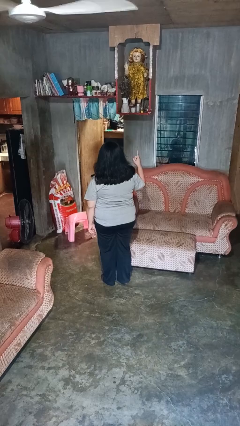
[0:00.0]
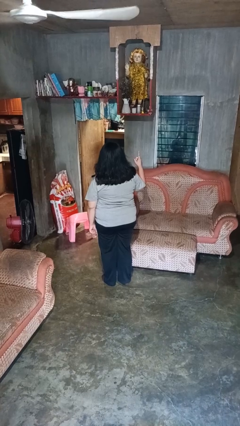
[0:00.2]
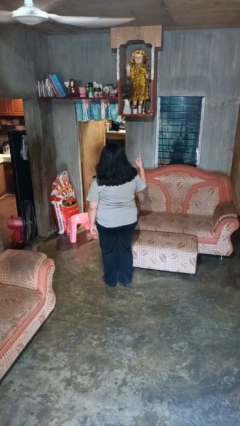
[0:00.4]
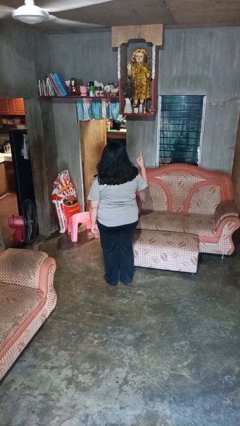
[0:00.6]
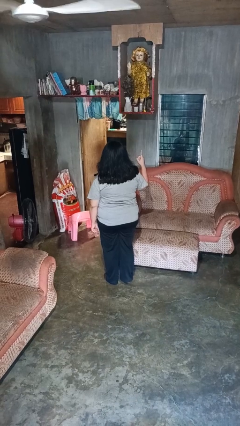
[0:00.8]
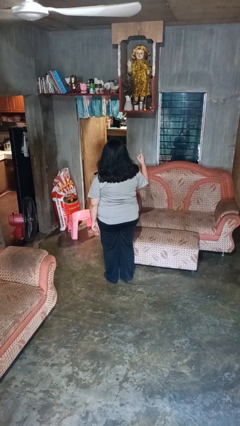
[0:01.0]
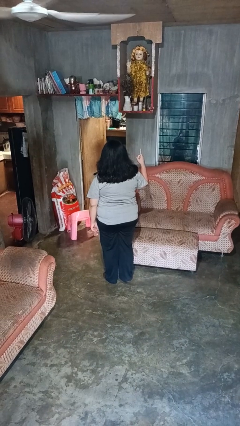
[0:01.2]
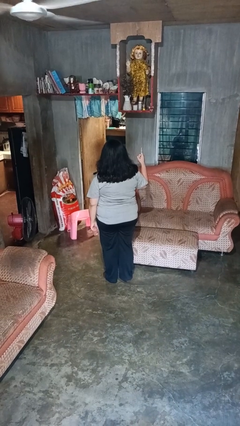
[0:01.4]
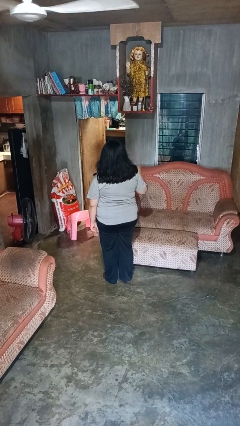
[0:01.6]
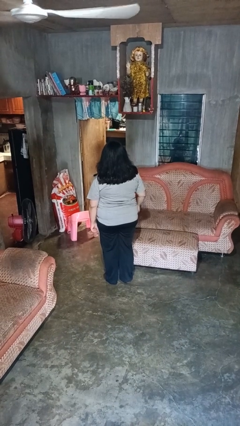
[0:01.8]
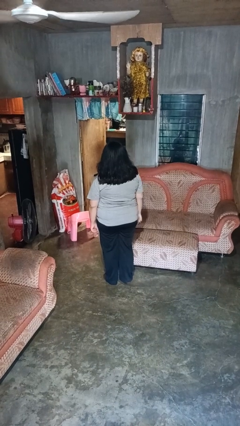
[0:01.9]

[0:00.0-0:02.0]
person gestures number one

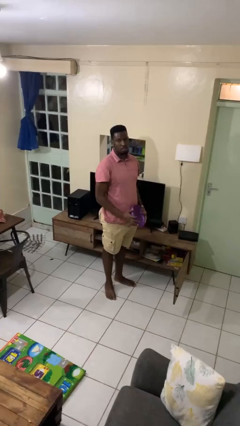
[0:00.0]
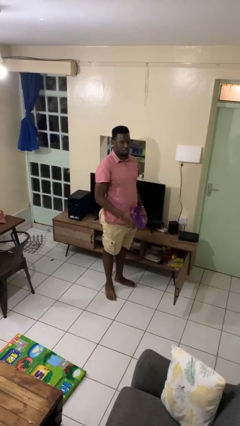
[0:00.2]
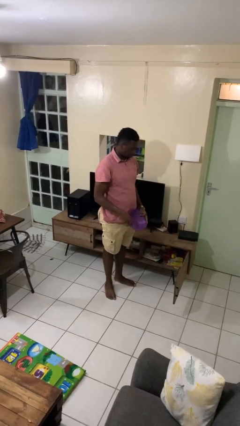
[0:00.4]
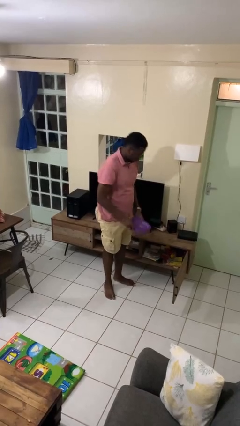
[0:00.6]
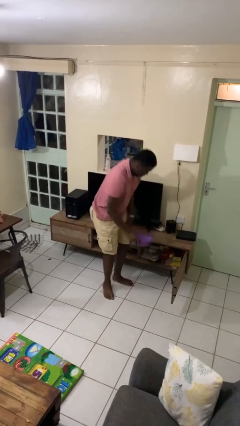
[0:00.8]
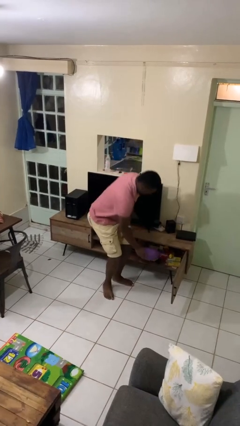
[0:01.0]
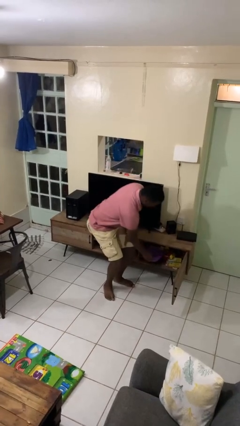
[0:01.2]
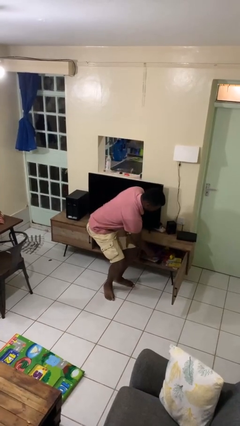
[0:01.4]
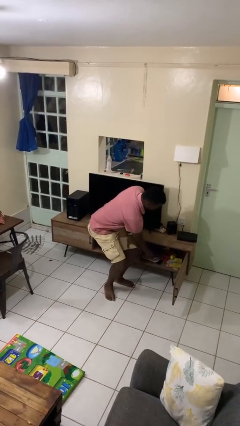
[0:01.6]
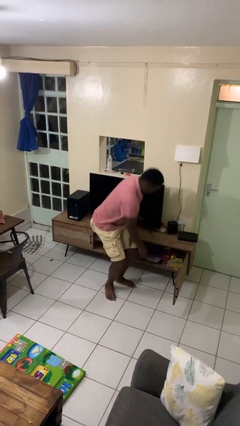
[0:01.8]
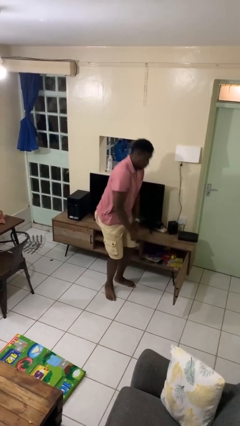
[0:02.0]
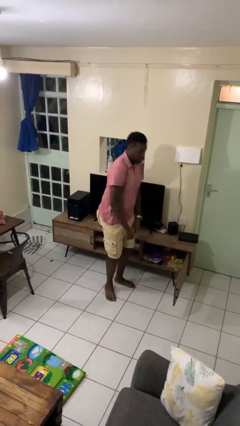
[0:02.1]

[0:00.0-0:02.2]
person puts down object into cabinet

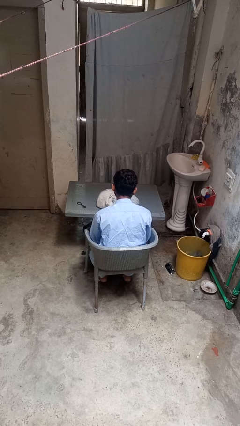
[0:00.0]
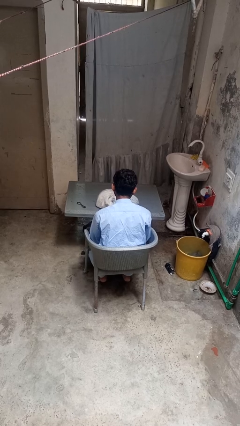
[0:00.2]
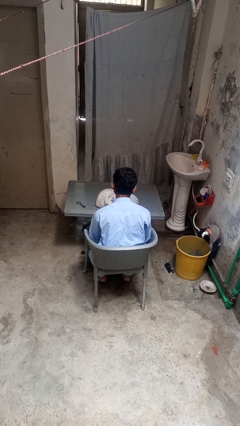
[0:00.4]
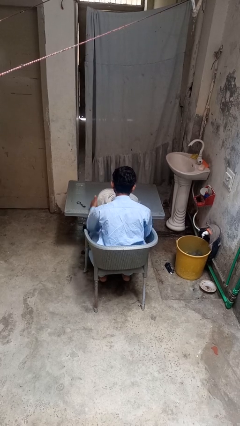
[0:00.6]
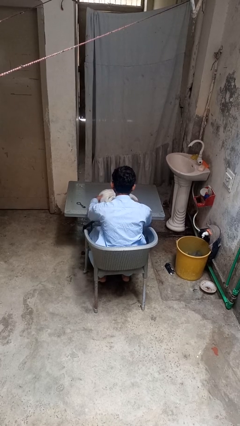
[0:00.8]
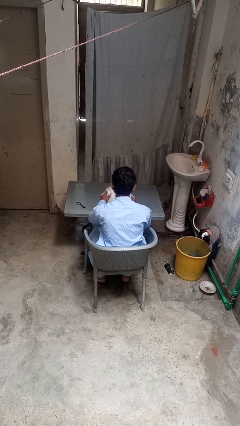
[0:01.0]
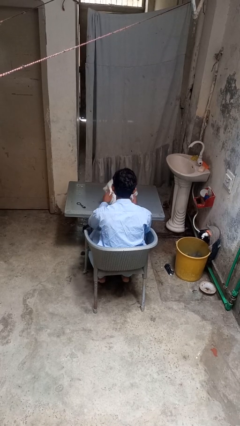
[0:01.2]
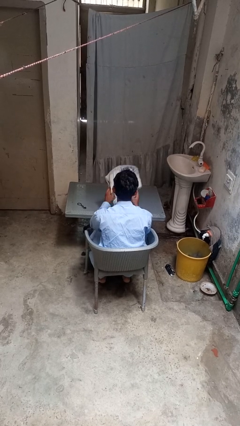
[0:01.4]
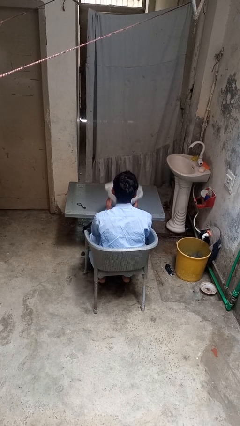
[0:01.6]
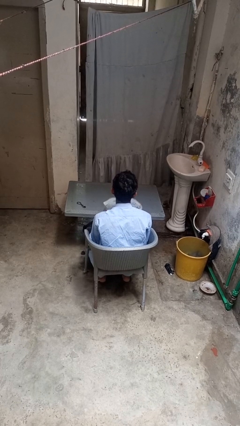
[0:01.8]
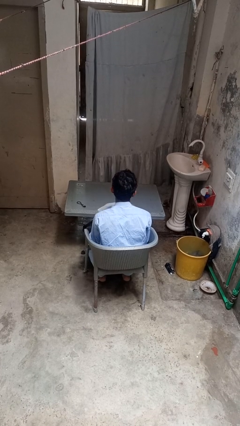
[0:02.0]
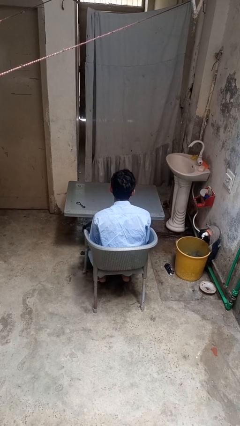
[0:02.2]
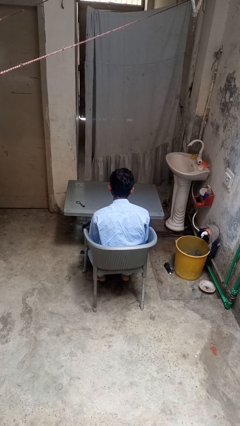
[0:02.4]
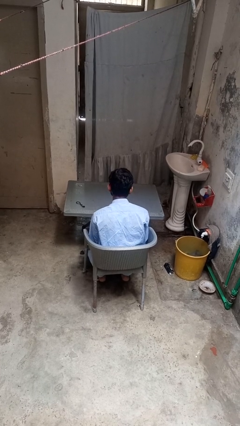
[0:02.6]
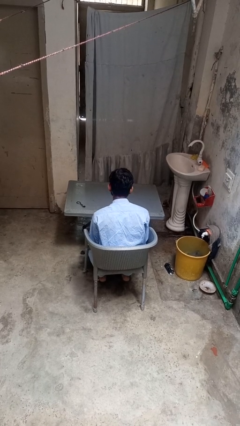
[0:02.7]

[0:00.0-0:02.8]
person picks up object from table

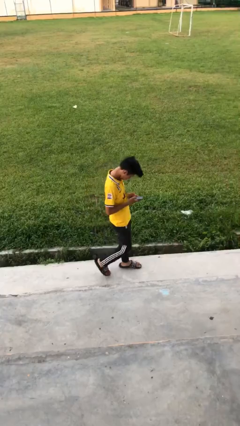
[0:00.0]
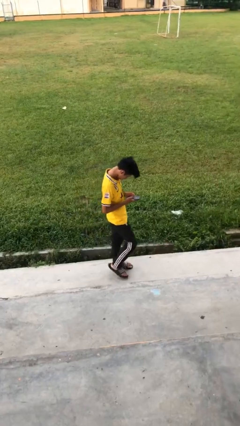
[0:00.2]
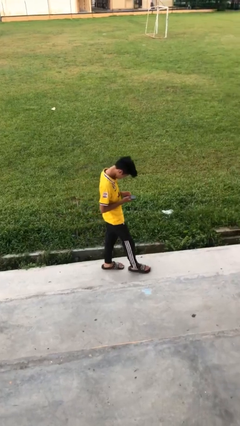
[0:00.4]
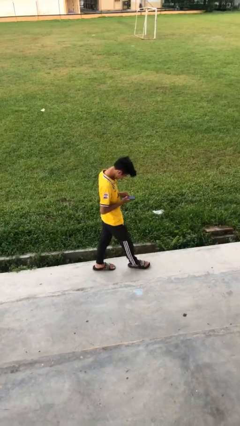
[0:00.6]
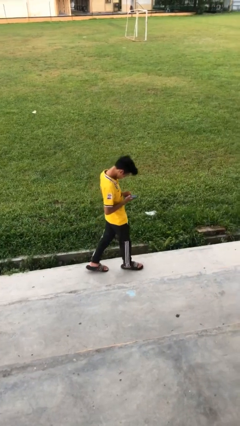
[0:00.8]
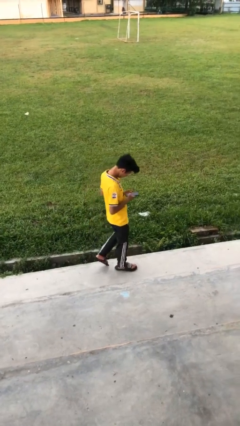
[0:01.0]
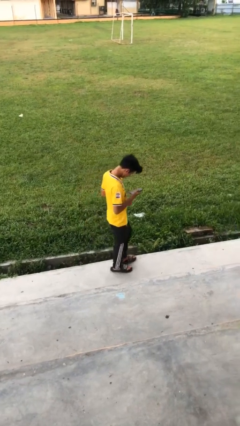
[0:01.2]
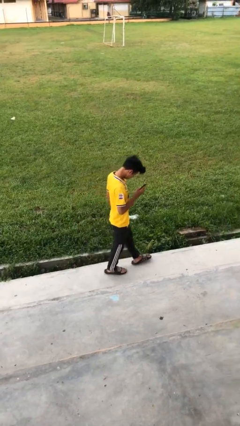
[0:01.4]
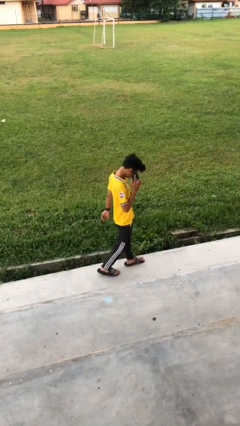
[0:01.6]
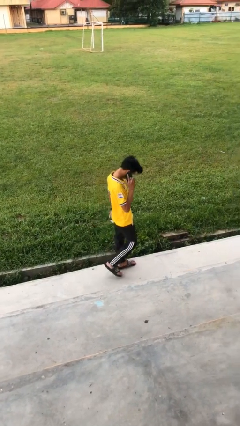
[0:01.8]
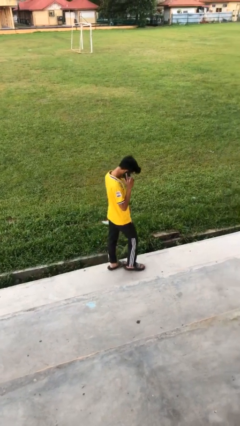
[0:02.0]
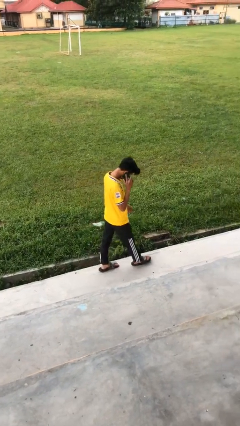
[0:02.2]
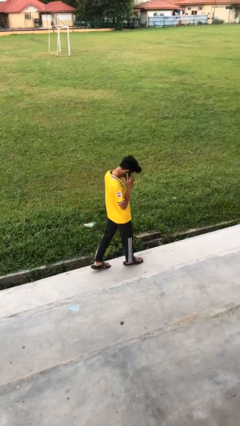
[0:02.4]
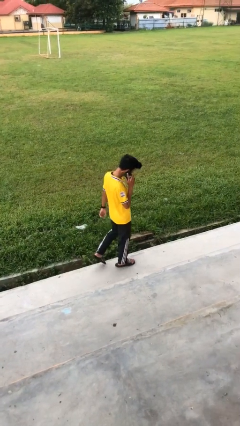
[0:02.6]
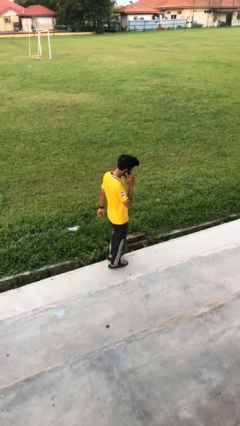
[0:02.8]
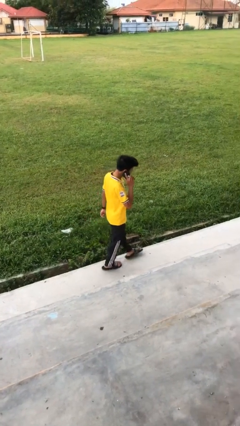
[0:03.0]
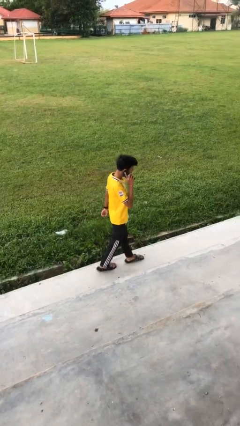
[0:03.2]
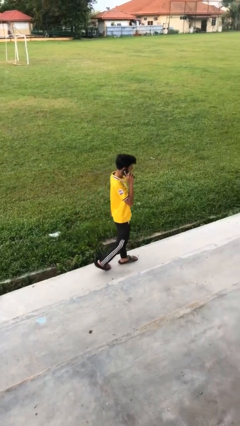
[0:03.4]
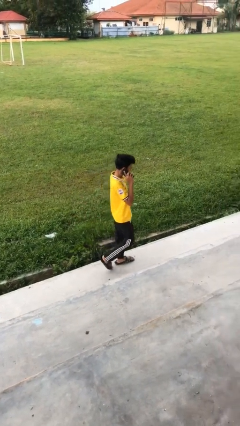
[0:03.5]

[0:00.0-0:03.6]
person talks on phone

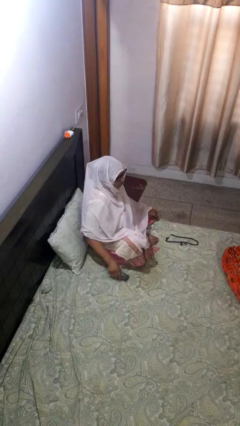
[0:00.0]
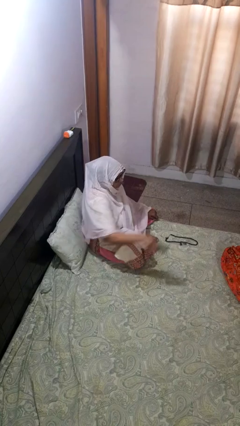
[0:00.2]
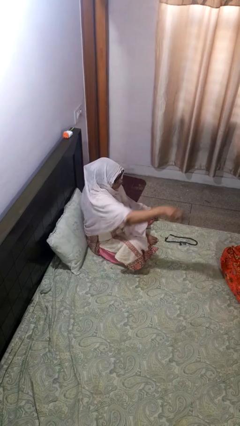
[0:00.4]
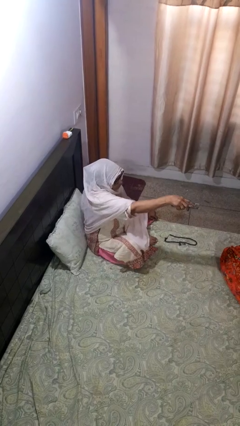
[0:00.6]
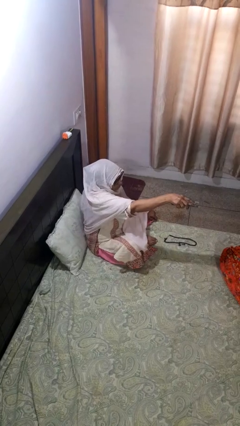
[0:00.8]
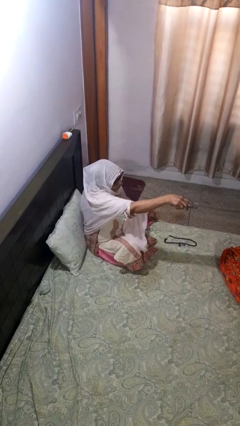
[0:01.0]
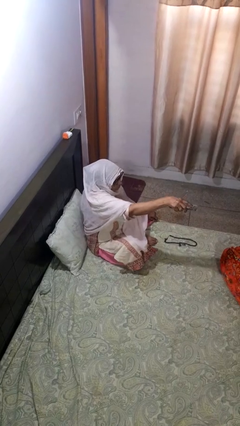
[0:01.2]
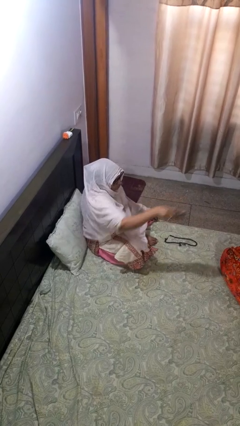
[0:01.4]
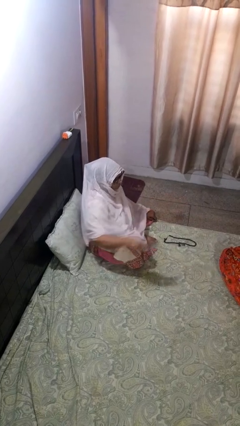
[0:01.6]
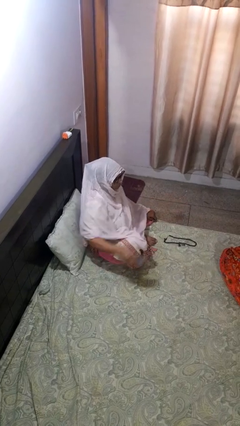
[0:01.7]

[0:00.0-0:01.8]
person uses television remote

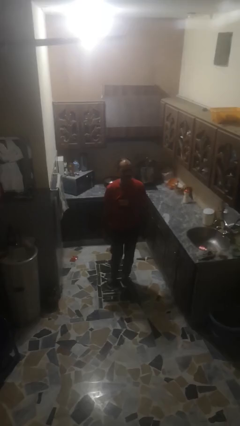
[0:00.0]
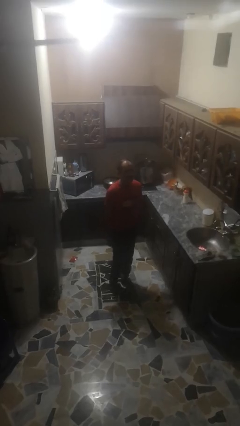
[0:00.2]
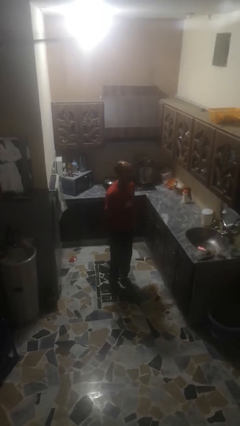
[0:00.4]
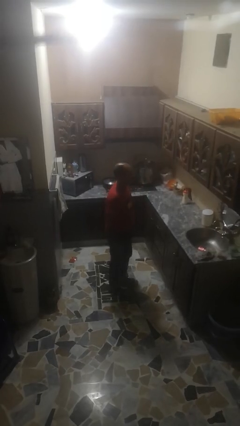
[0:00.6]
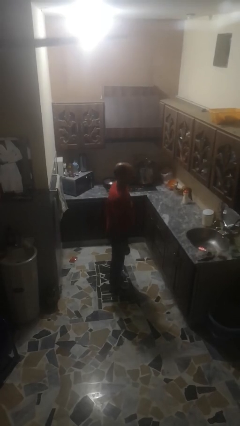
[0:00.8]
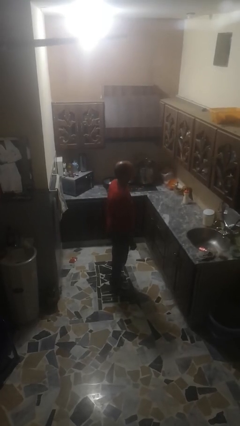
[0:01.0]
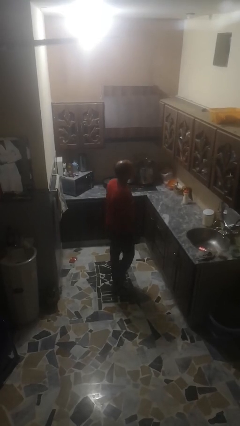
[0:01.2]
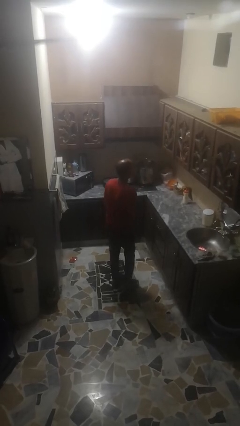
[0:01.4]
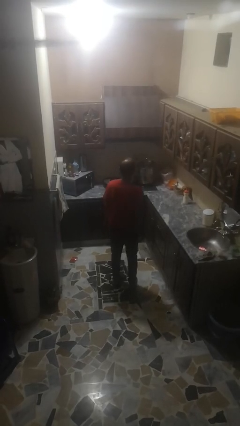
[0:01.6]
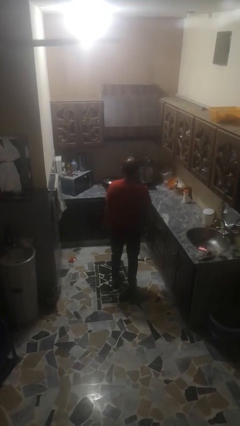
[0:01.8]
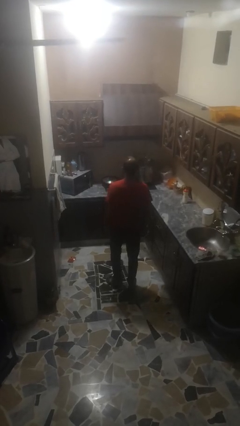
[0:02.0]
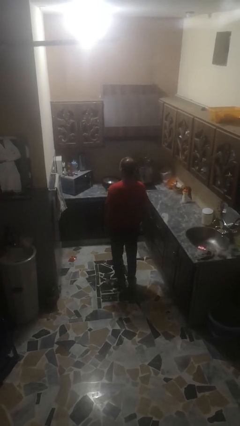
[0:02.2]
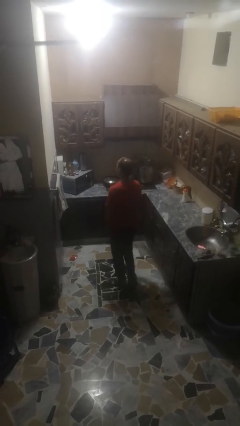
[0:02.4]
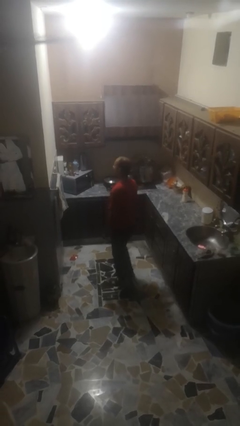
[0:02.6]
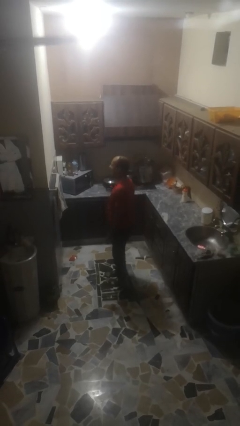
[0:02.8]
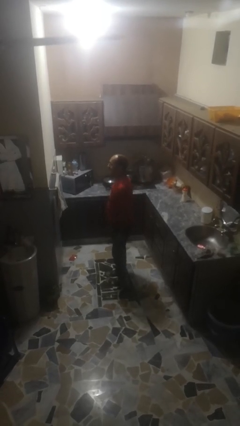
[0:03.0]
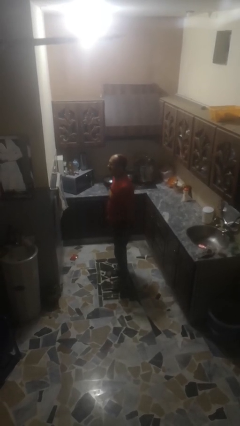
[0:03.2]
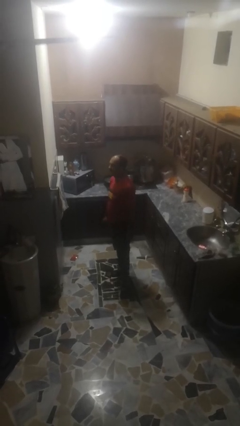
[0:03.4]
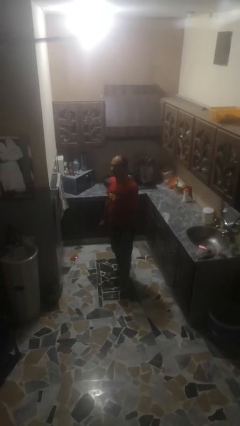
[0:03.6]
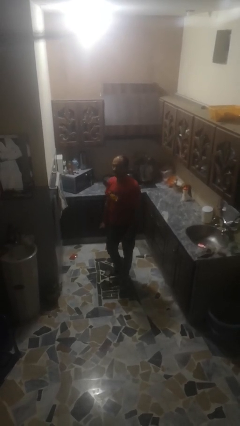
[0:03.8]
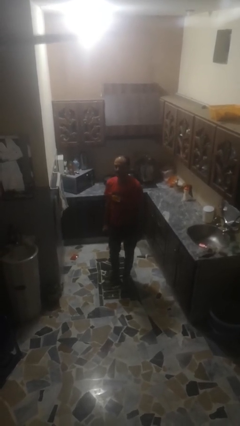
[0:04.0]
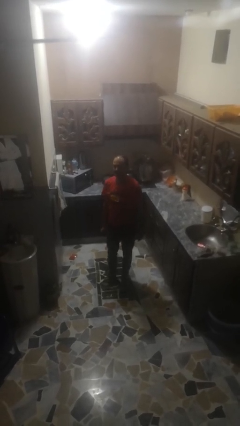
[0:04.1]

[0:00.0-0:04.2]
person twirls

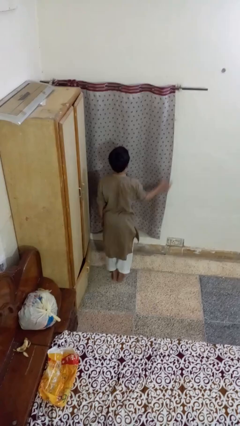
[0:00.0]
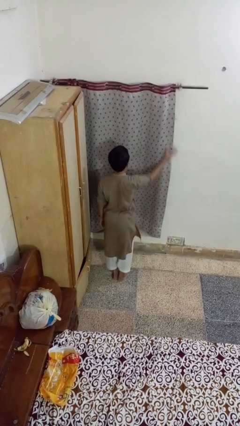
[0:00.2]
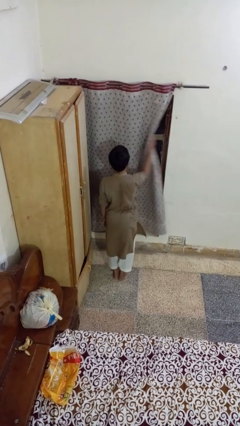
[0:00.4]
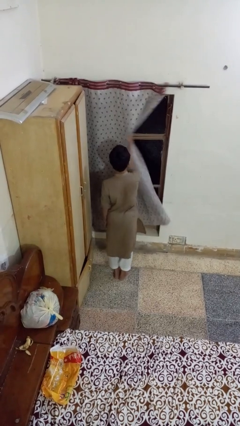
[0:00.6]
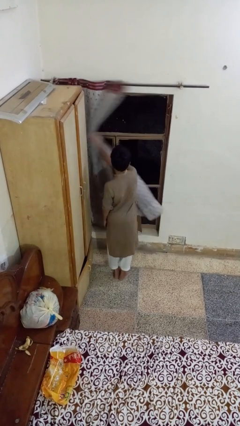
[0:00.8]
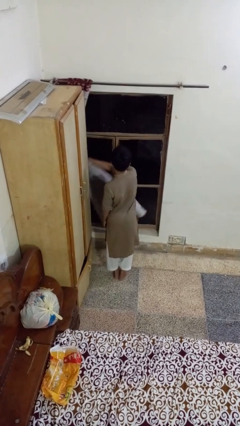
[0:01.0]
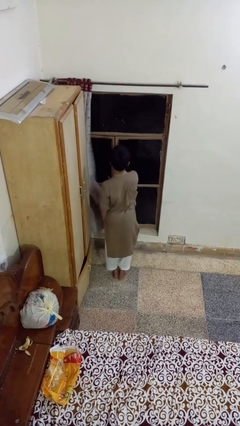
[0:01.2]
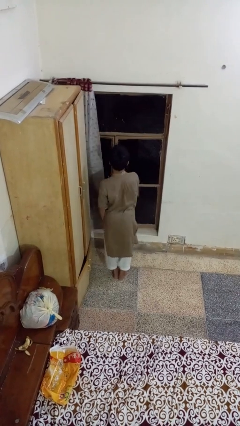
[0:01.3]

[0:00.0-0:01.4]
person opens curtains
